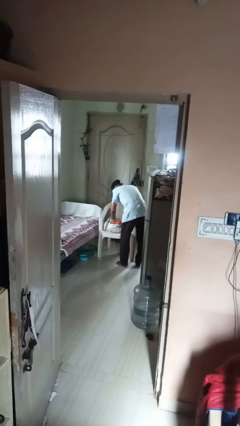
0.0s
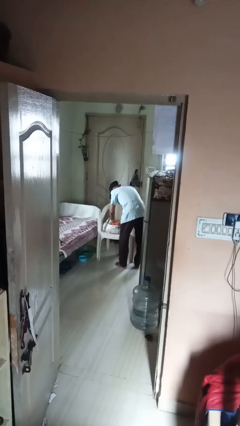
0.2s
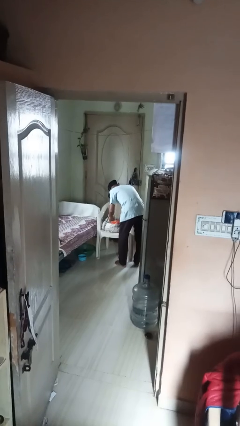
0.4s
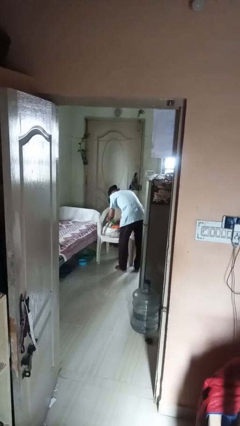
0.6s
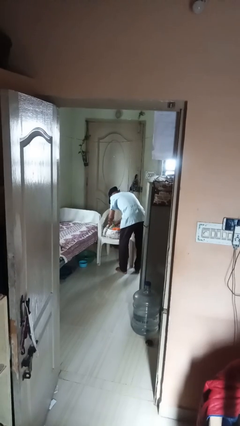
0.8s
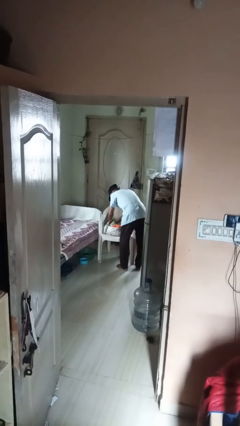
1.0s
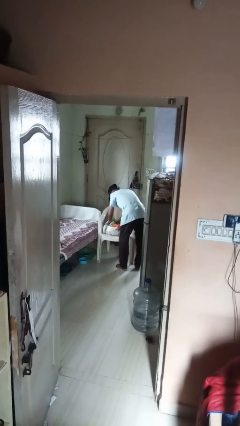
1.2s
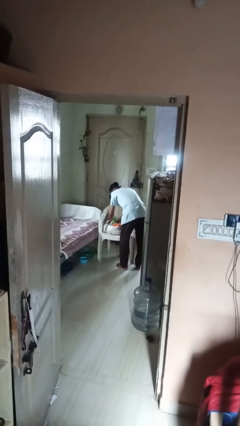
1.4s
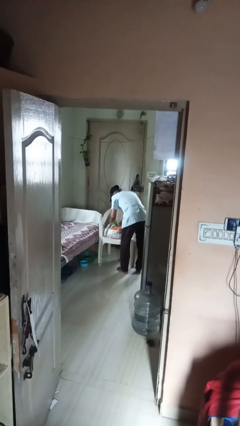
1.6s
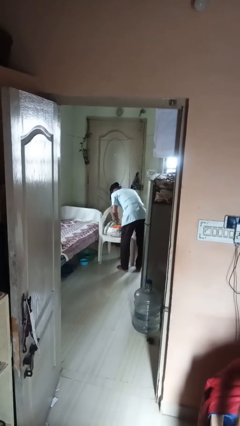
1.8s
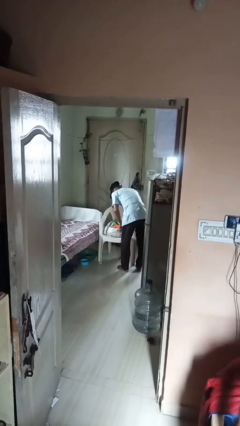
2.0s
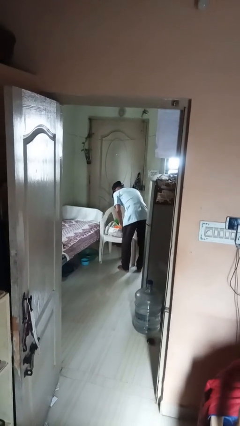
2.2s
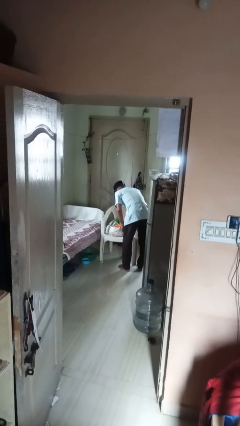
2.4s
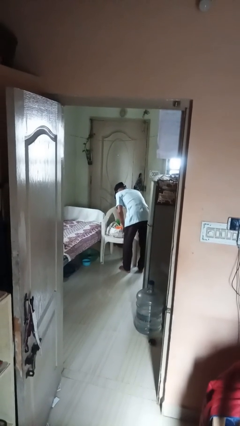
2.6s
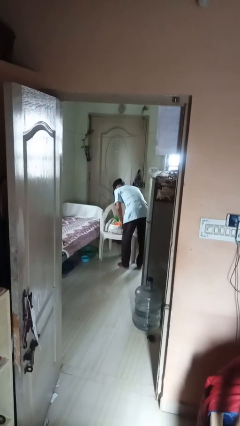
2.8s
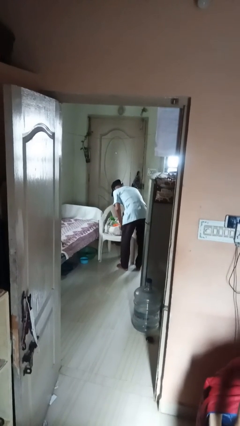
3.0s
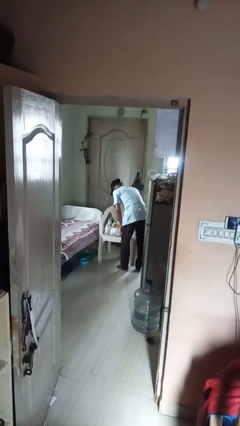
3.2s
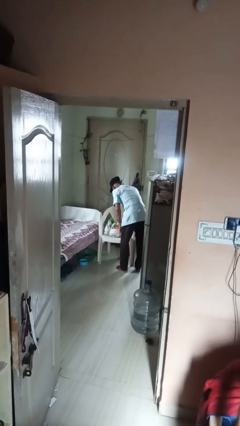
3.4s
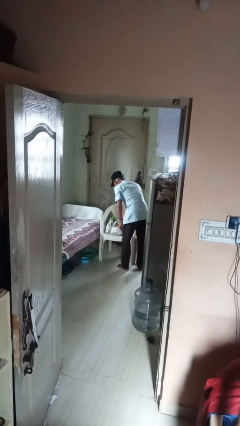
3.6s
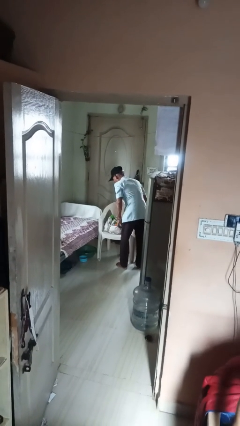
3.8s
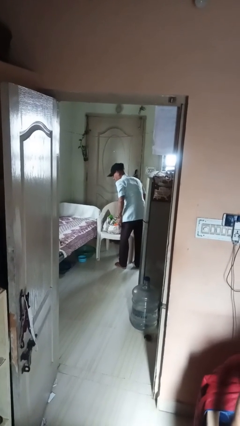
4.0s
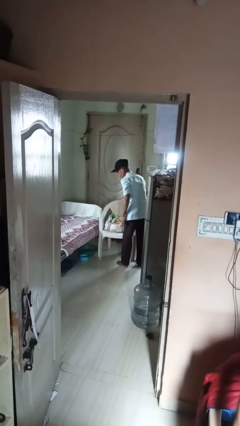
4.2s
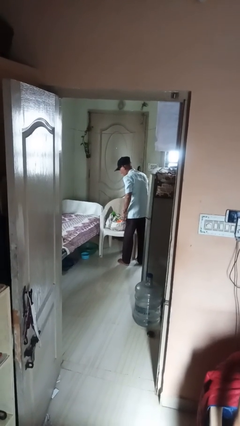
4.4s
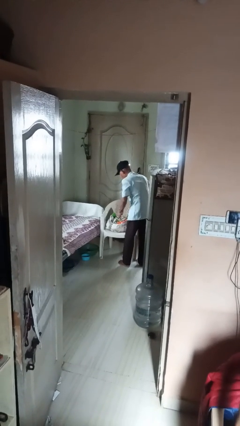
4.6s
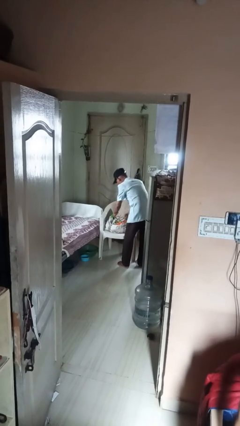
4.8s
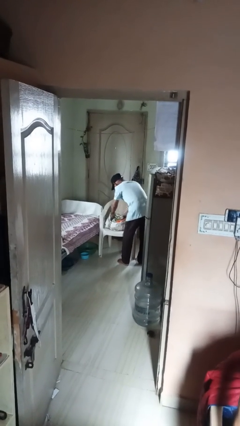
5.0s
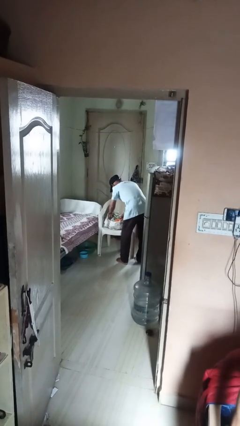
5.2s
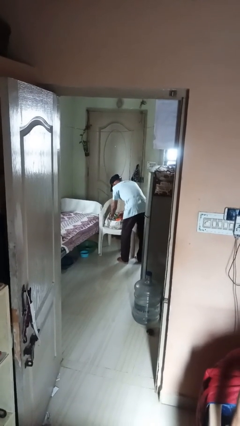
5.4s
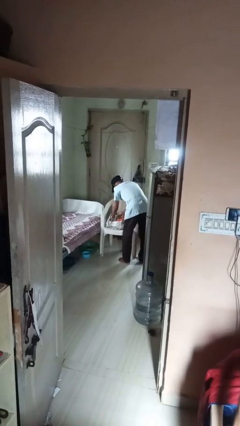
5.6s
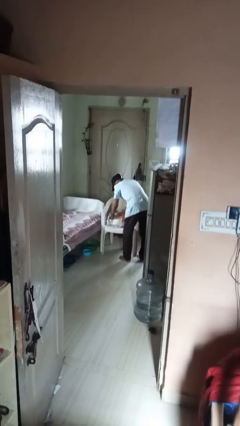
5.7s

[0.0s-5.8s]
person searches in bag

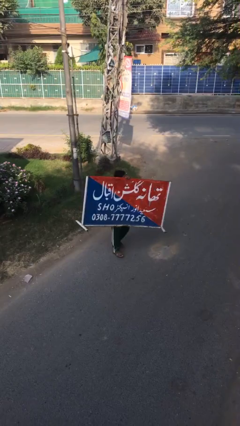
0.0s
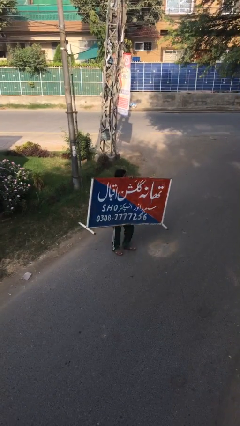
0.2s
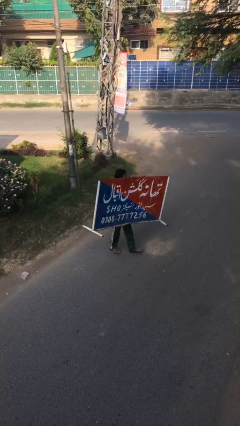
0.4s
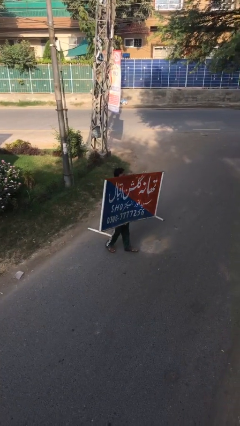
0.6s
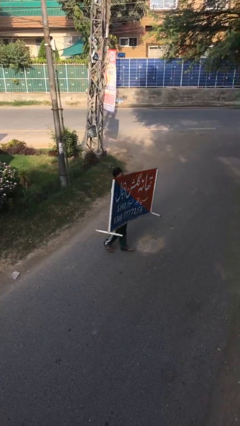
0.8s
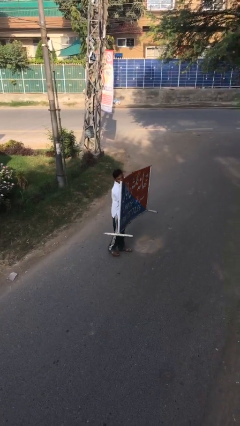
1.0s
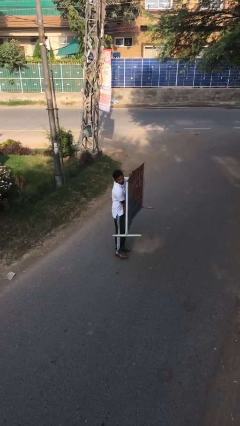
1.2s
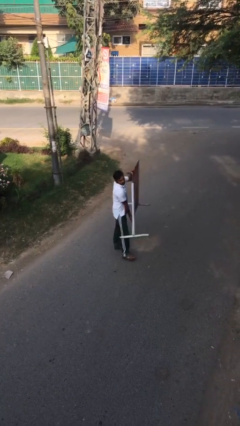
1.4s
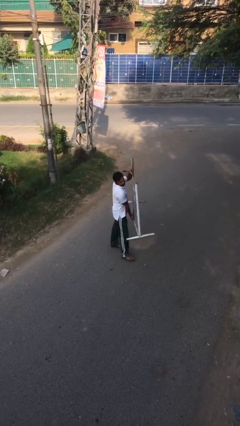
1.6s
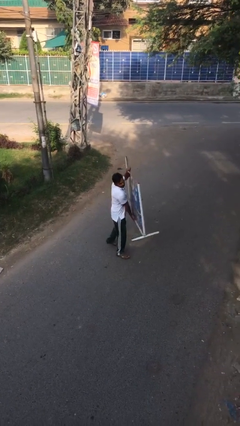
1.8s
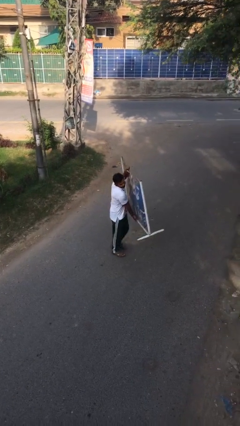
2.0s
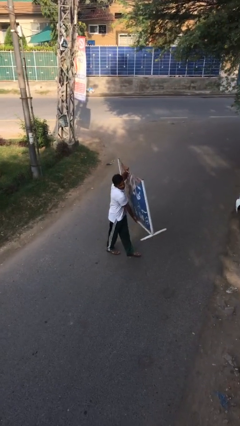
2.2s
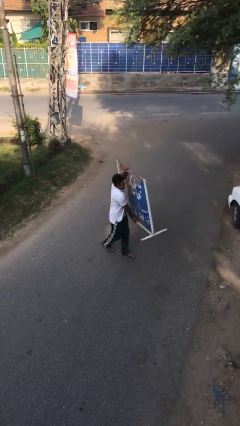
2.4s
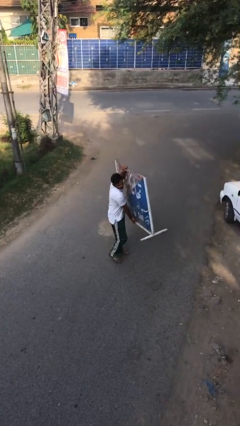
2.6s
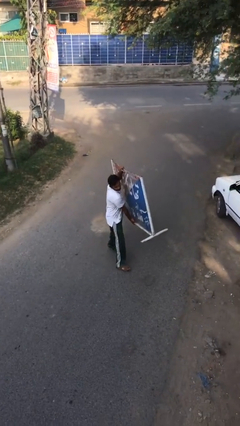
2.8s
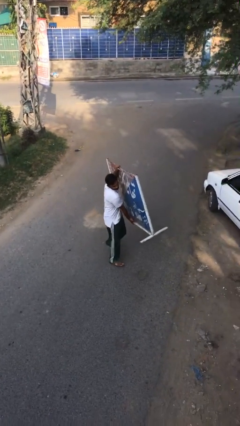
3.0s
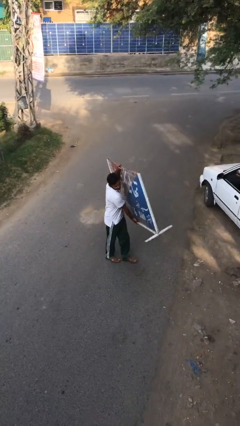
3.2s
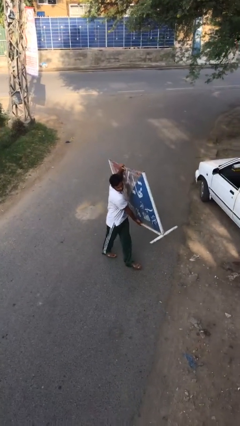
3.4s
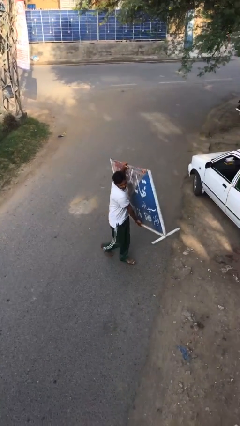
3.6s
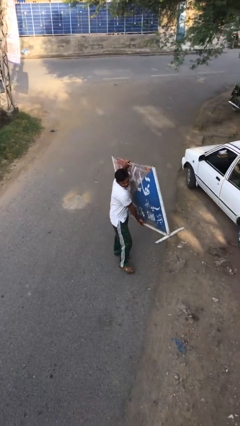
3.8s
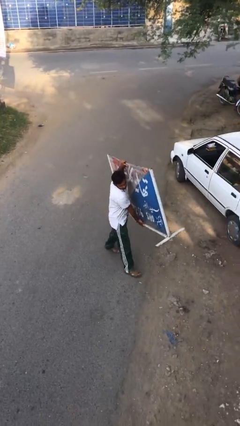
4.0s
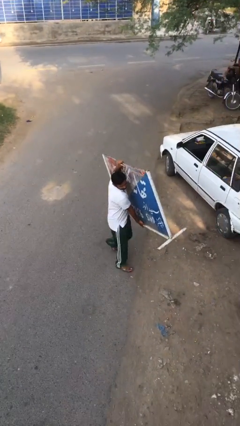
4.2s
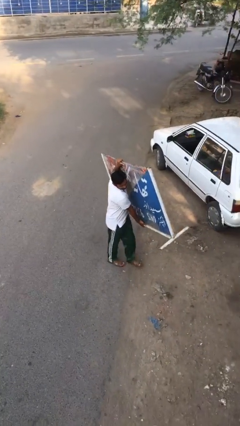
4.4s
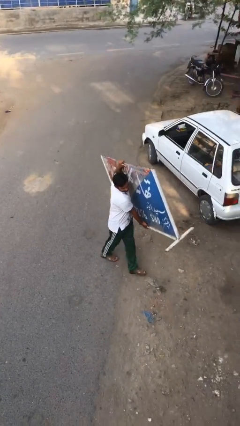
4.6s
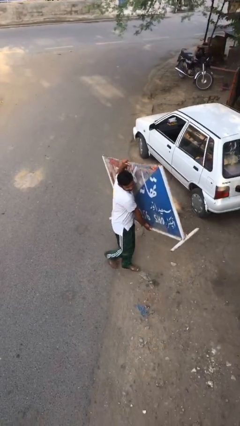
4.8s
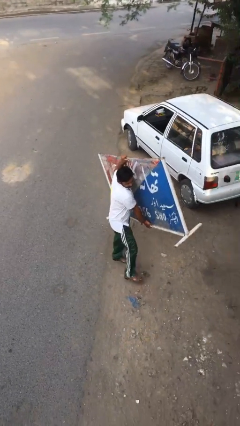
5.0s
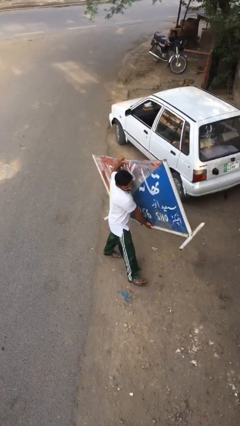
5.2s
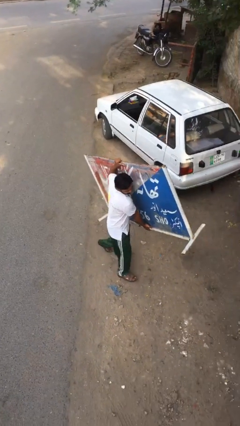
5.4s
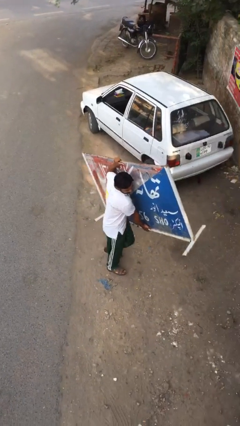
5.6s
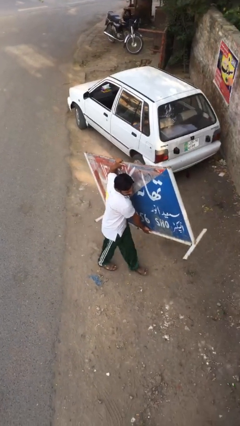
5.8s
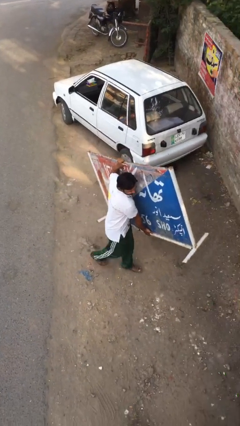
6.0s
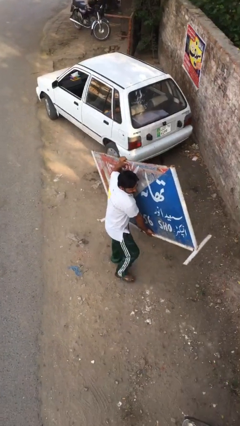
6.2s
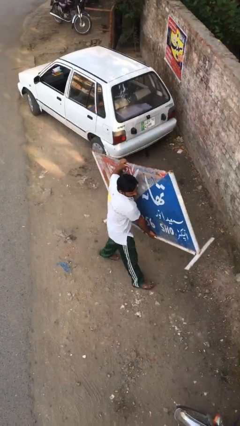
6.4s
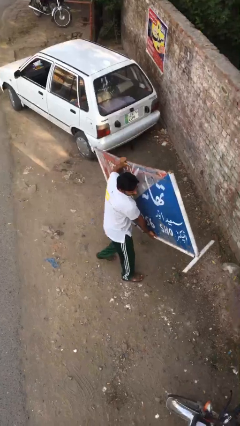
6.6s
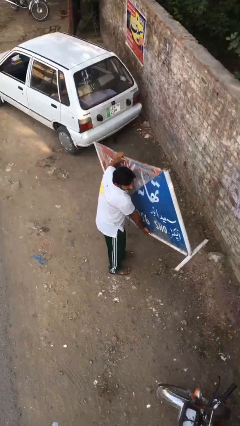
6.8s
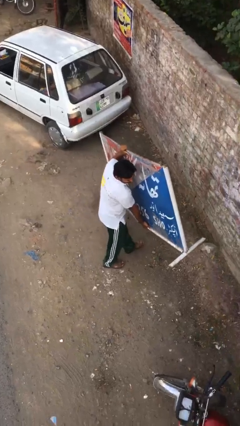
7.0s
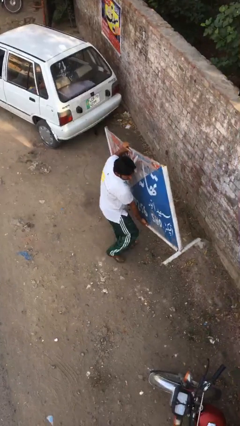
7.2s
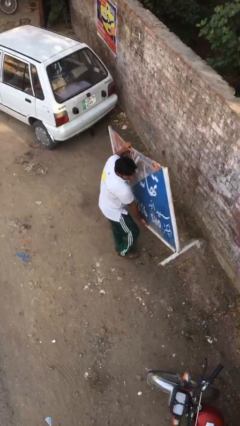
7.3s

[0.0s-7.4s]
person carries heavy object

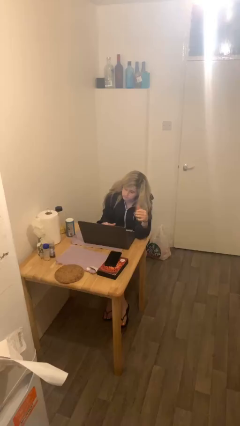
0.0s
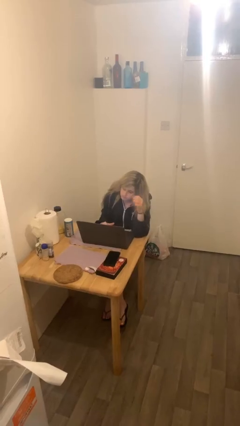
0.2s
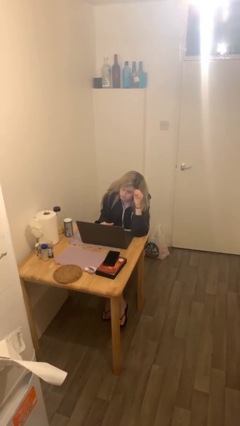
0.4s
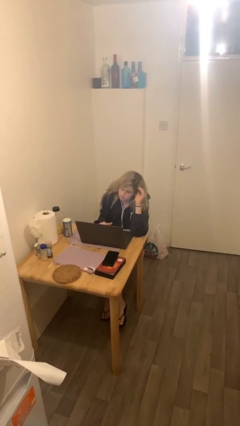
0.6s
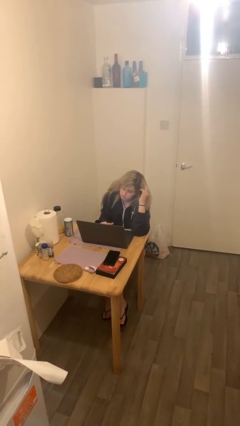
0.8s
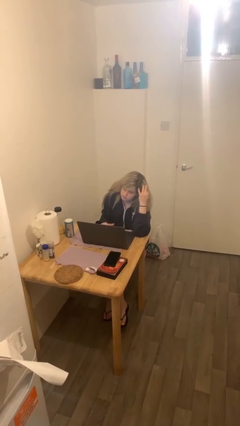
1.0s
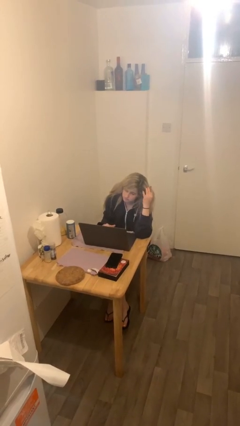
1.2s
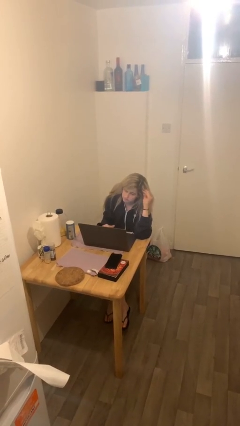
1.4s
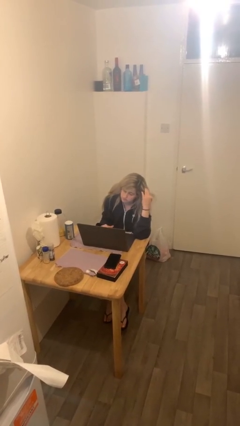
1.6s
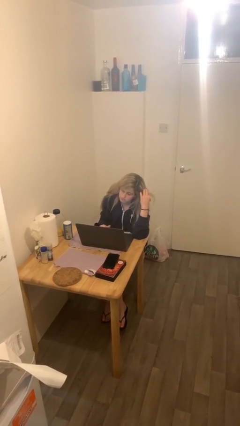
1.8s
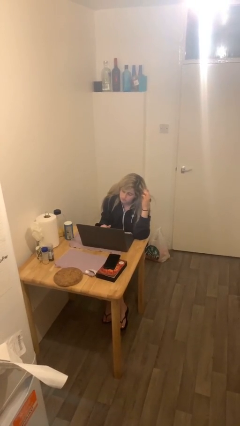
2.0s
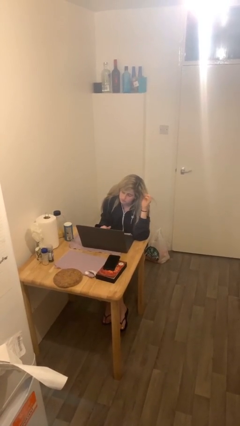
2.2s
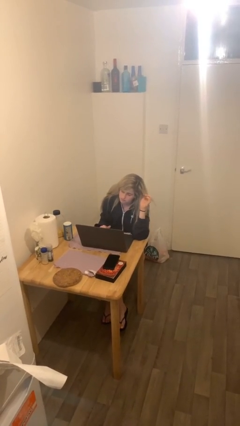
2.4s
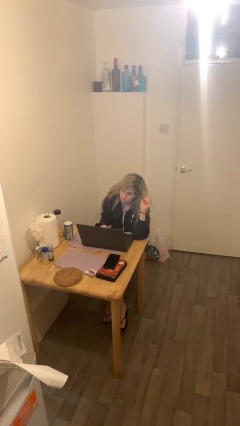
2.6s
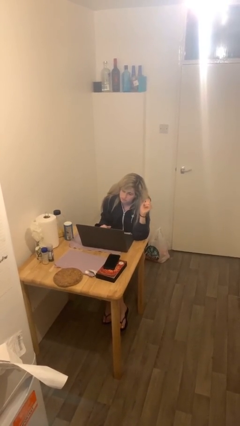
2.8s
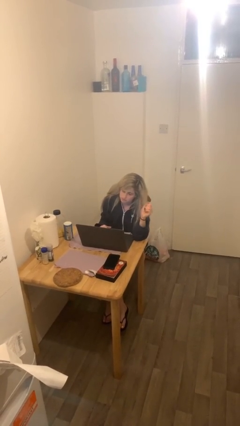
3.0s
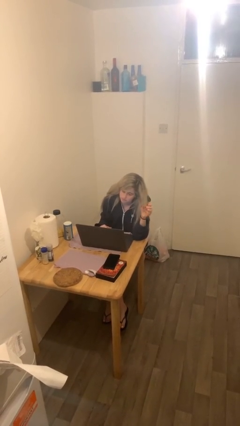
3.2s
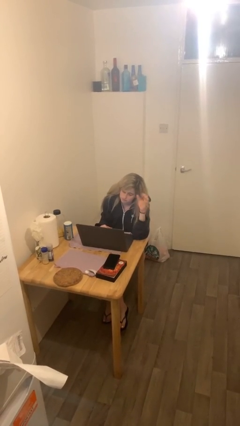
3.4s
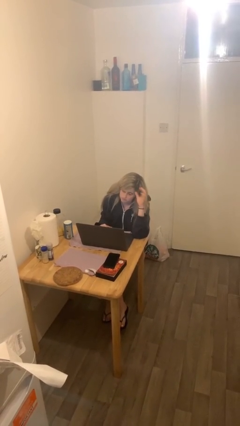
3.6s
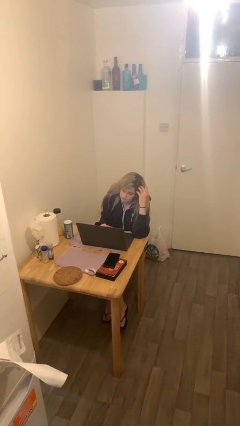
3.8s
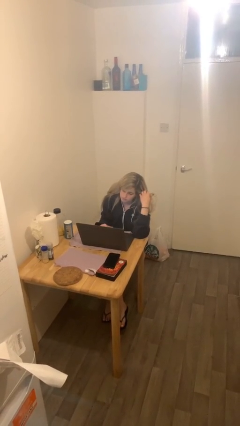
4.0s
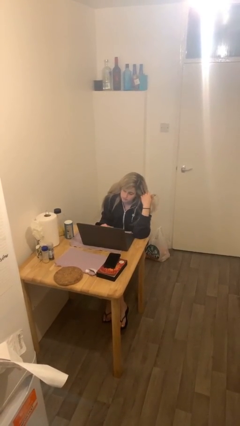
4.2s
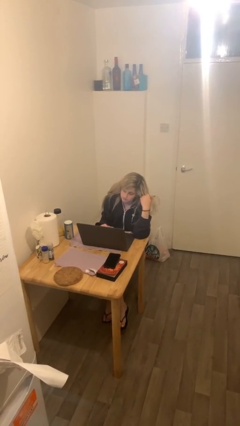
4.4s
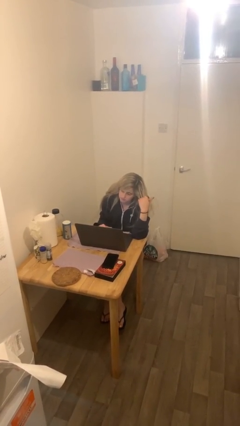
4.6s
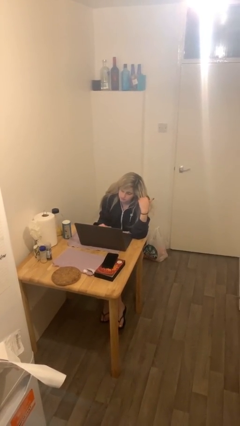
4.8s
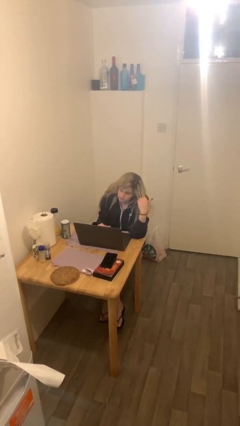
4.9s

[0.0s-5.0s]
person interacts with laptop

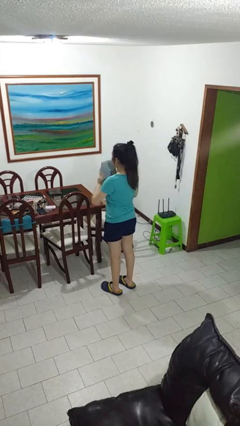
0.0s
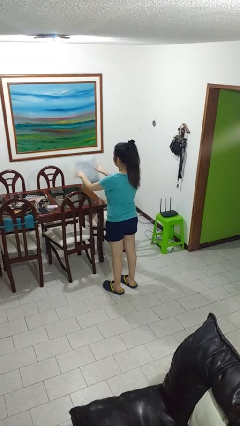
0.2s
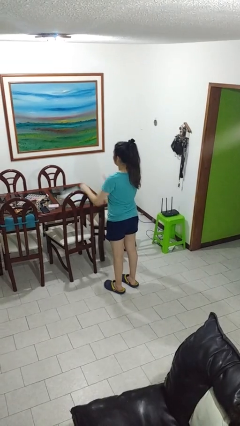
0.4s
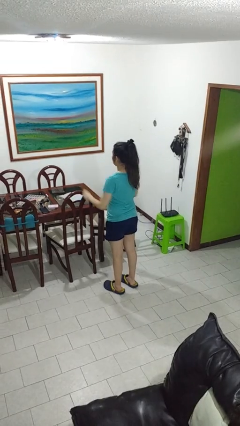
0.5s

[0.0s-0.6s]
person throws object on table
